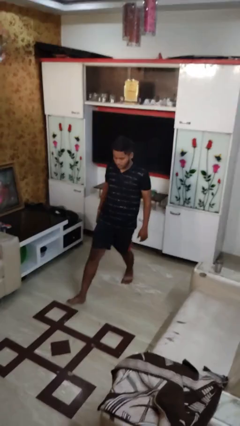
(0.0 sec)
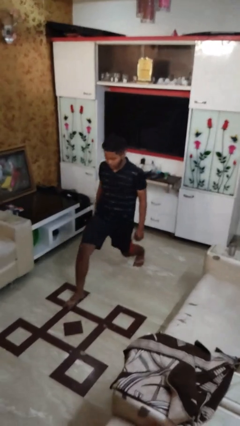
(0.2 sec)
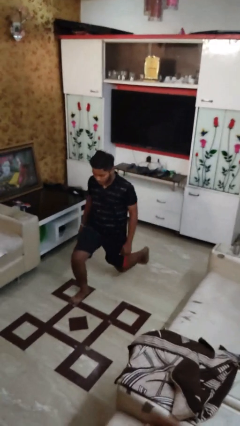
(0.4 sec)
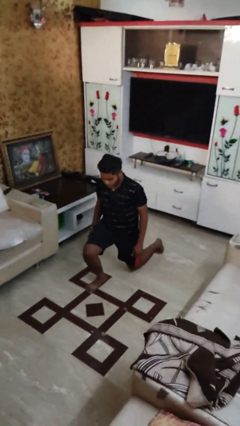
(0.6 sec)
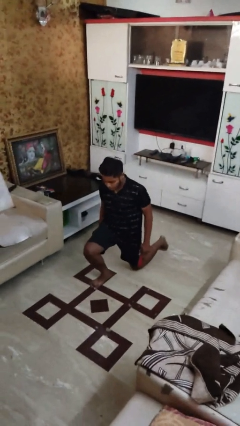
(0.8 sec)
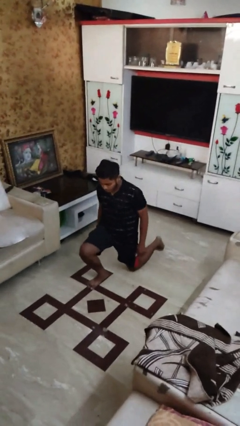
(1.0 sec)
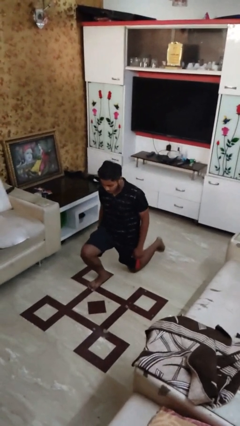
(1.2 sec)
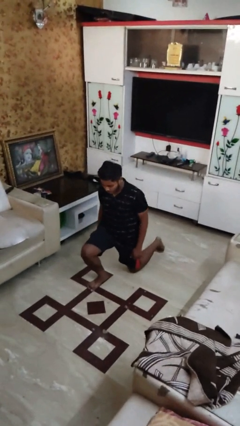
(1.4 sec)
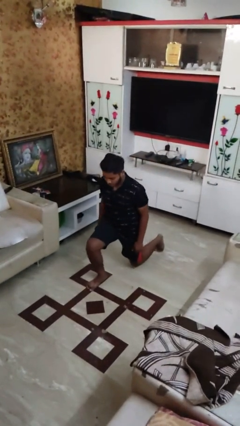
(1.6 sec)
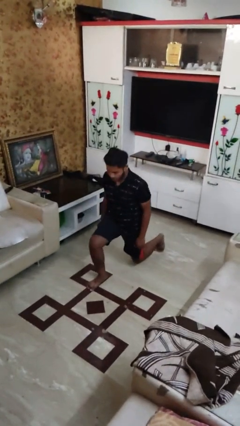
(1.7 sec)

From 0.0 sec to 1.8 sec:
person exercises with lunges

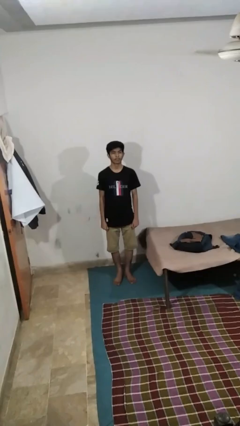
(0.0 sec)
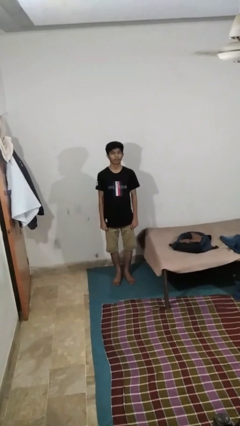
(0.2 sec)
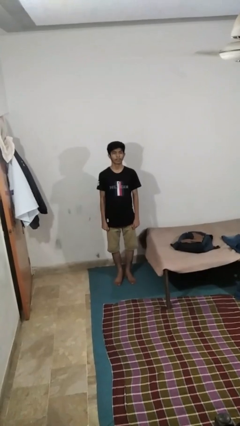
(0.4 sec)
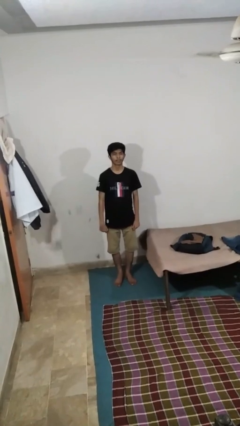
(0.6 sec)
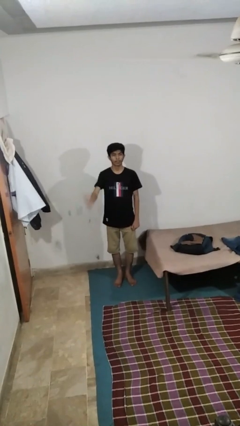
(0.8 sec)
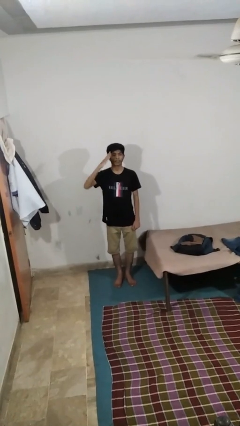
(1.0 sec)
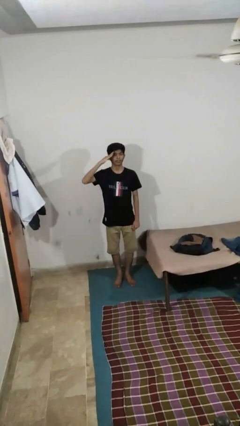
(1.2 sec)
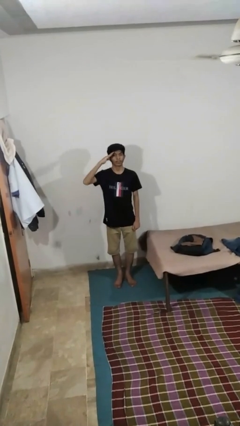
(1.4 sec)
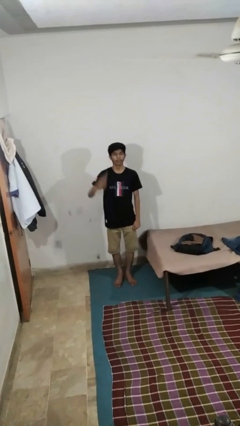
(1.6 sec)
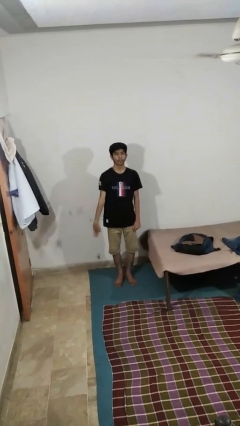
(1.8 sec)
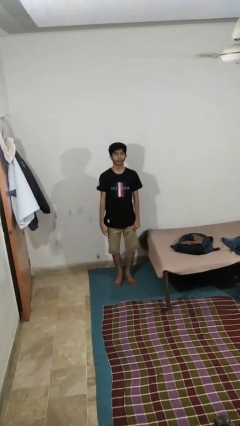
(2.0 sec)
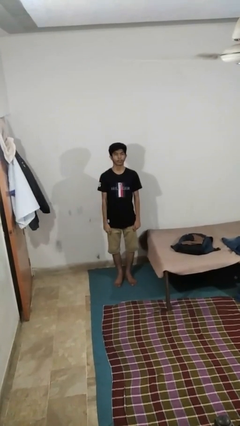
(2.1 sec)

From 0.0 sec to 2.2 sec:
person salutes

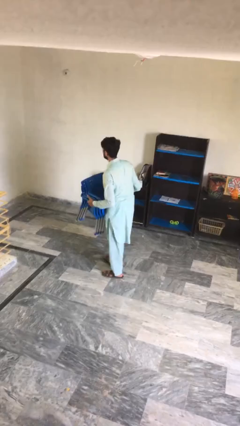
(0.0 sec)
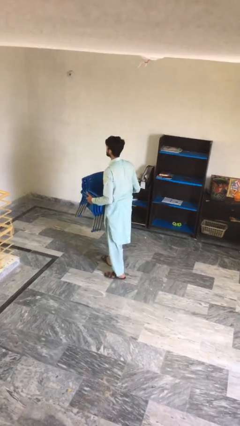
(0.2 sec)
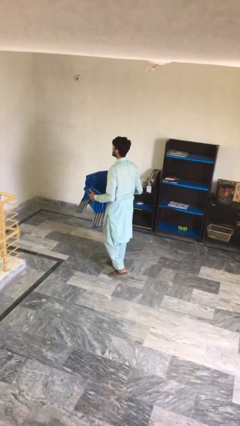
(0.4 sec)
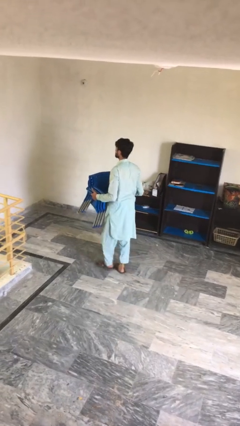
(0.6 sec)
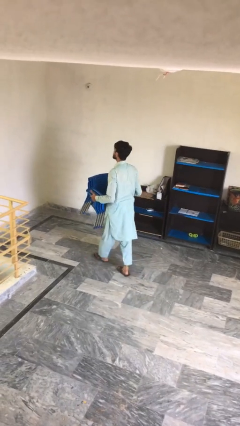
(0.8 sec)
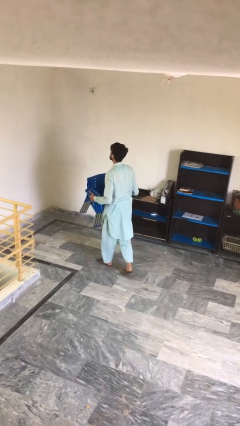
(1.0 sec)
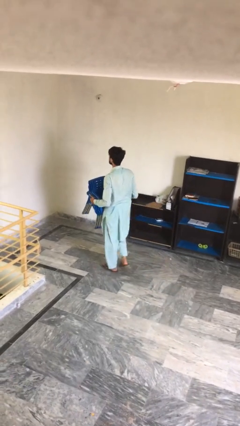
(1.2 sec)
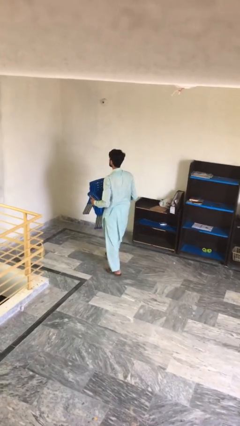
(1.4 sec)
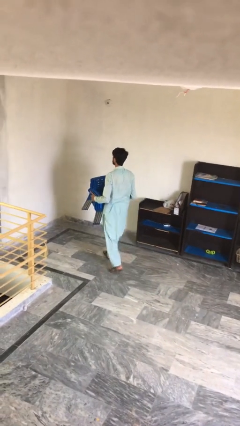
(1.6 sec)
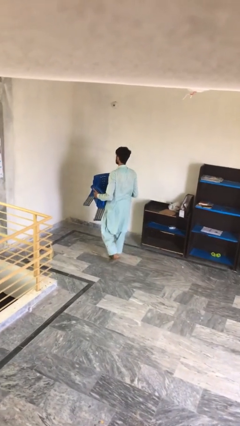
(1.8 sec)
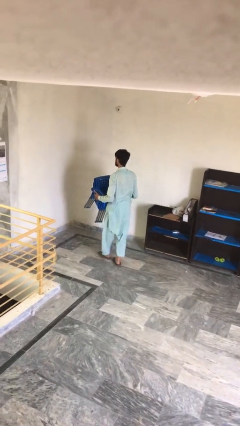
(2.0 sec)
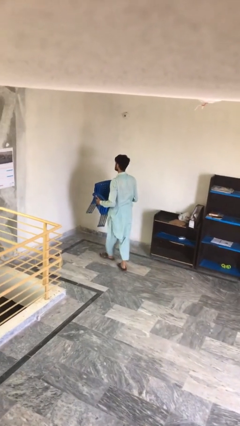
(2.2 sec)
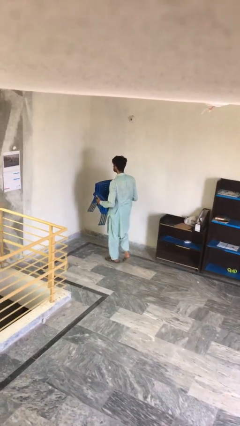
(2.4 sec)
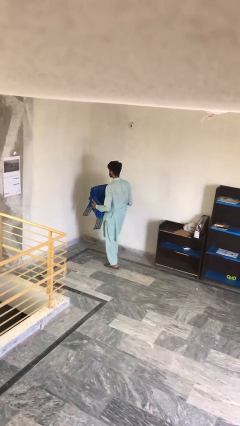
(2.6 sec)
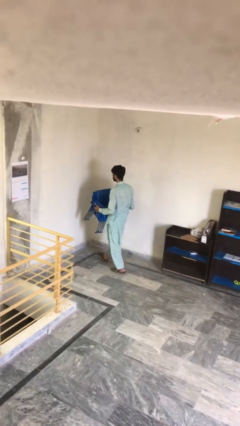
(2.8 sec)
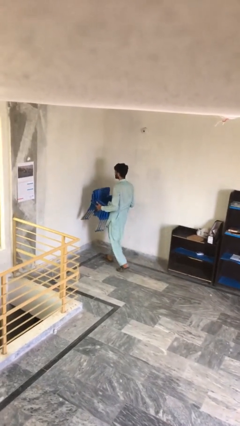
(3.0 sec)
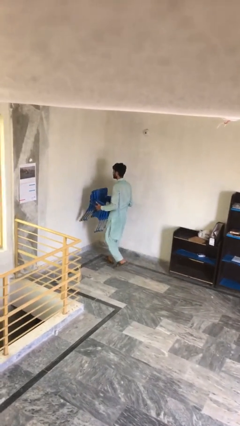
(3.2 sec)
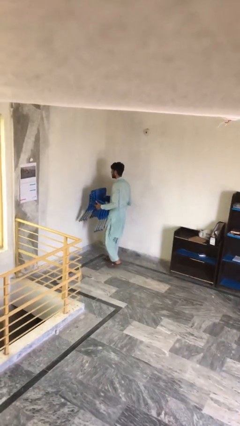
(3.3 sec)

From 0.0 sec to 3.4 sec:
person carries heavy object

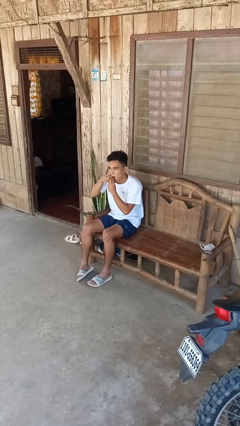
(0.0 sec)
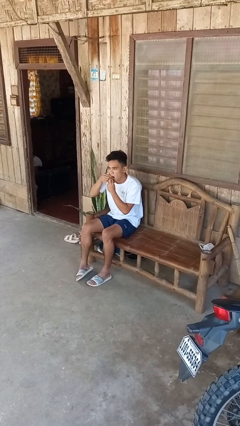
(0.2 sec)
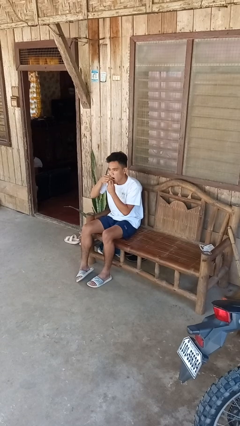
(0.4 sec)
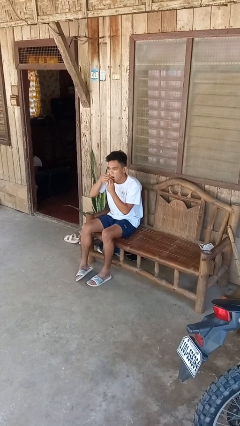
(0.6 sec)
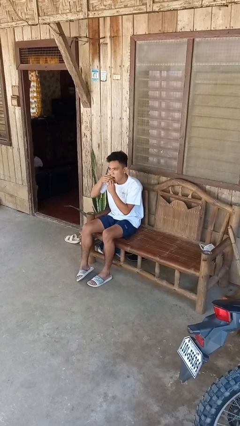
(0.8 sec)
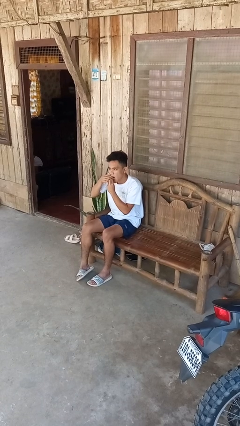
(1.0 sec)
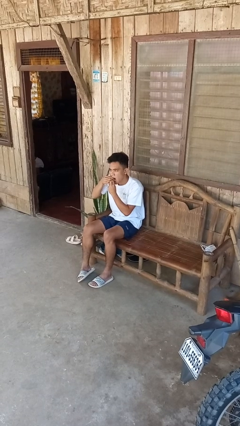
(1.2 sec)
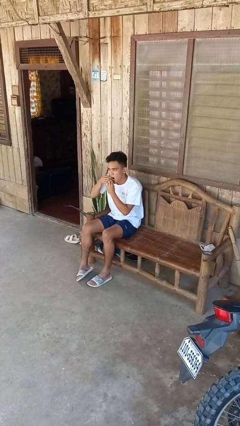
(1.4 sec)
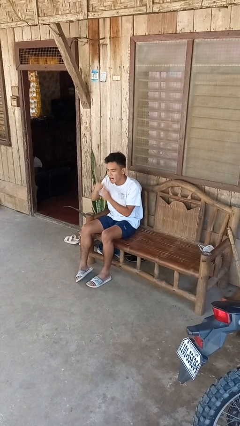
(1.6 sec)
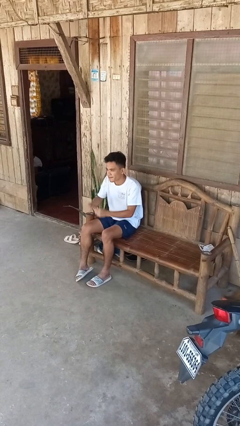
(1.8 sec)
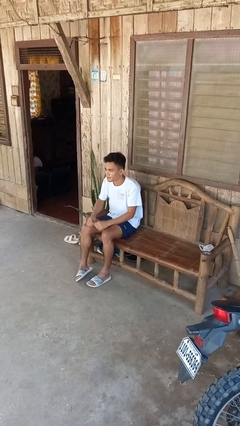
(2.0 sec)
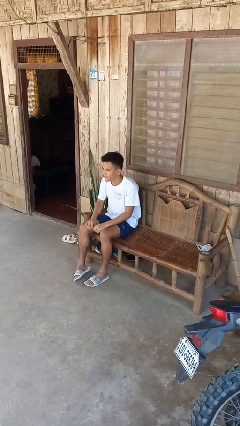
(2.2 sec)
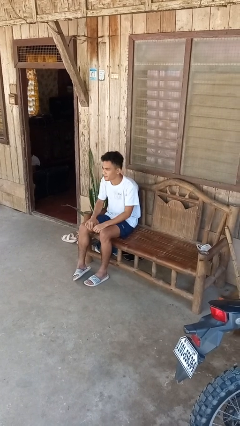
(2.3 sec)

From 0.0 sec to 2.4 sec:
person flosses

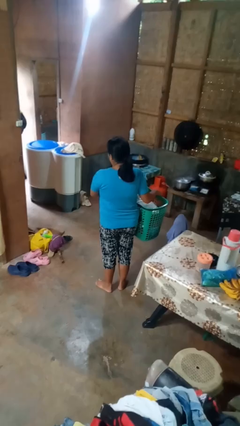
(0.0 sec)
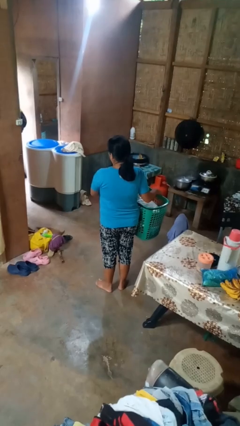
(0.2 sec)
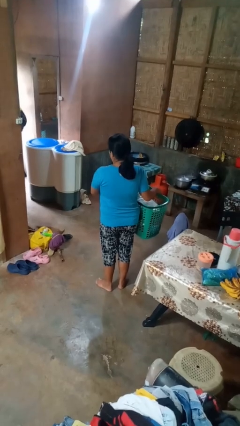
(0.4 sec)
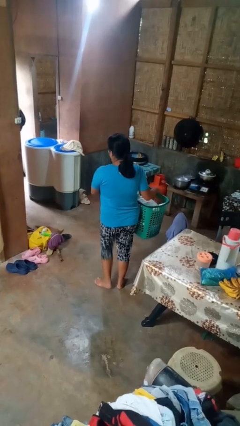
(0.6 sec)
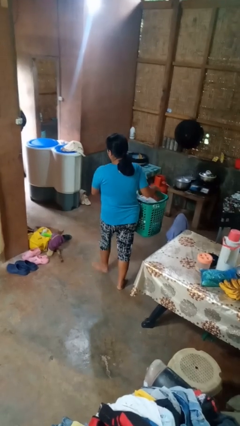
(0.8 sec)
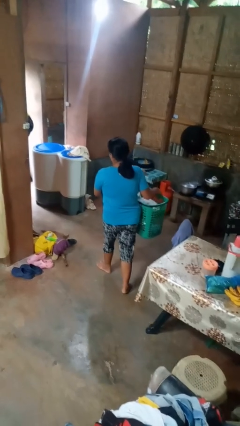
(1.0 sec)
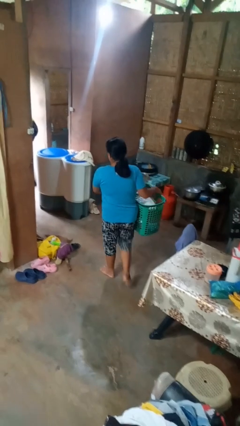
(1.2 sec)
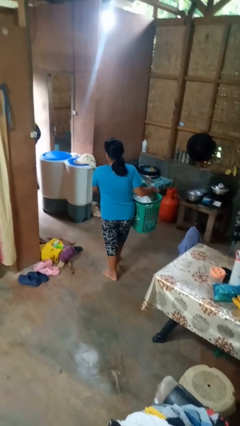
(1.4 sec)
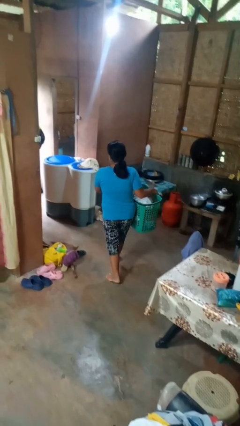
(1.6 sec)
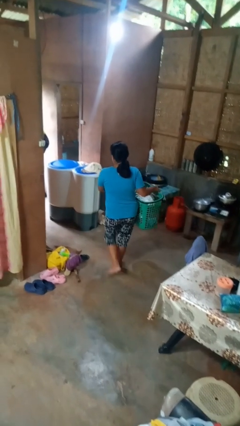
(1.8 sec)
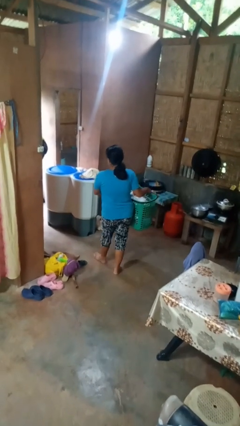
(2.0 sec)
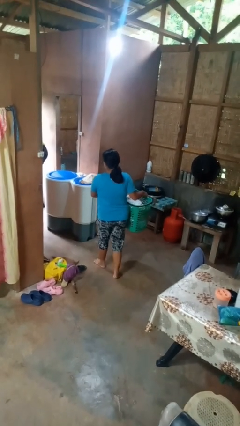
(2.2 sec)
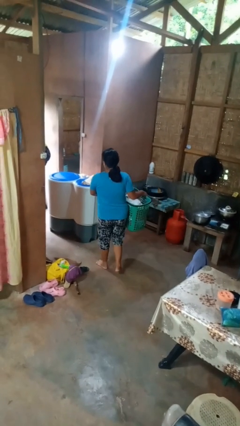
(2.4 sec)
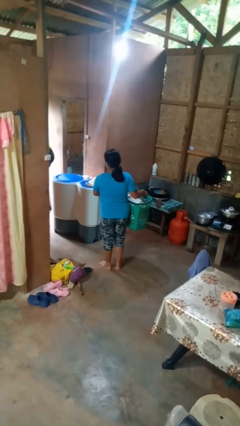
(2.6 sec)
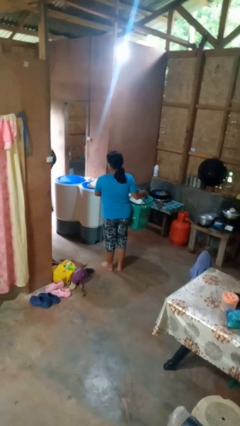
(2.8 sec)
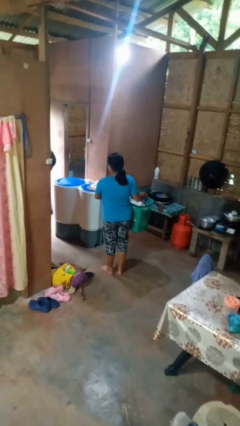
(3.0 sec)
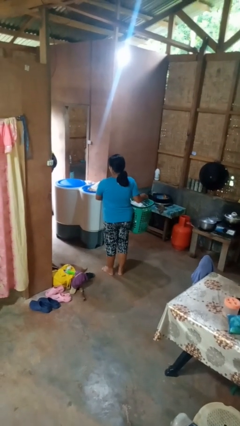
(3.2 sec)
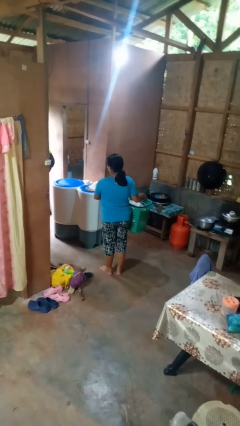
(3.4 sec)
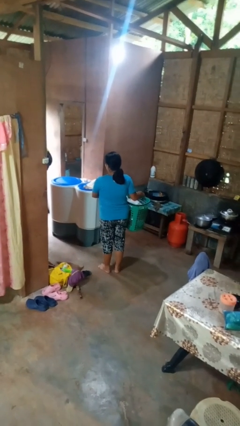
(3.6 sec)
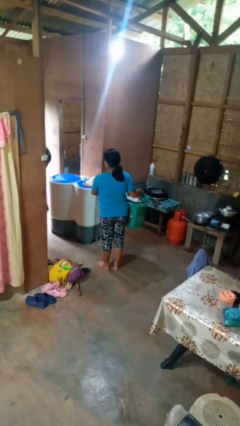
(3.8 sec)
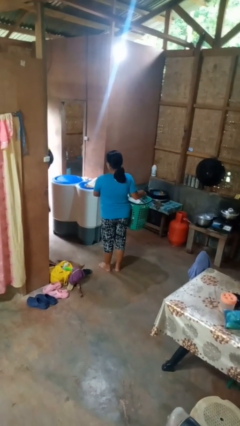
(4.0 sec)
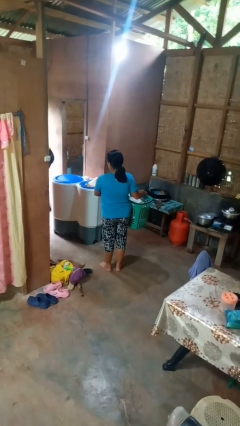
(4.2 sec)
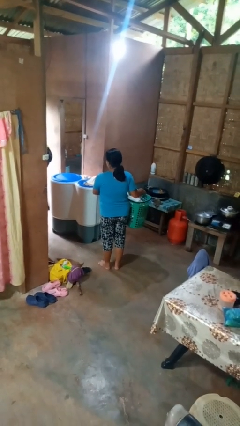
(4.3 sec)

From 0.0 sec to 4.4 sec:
person carries laundry basket

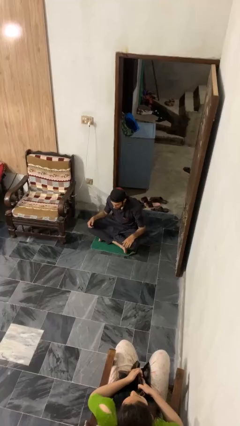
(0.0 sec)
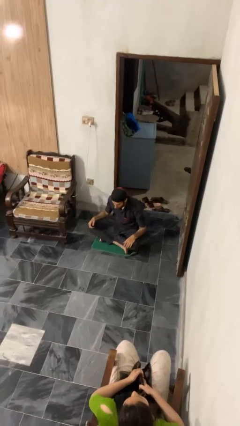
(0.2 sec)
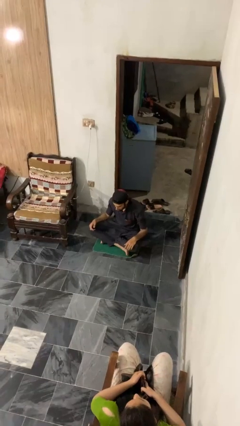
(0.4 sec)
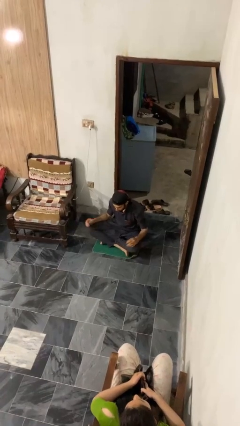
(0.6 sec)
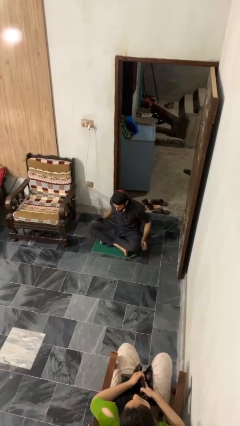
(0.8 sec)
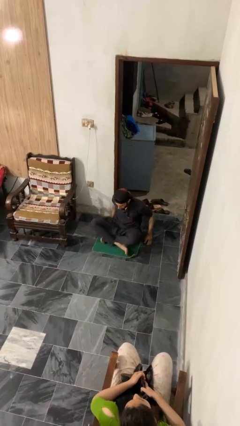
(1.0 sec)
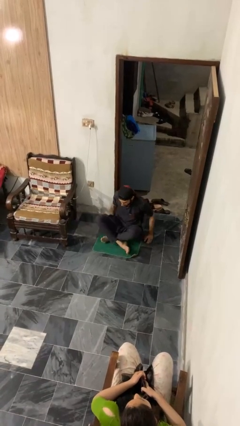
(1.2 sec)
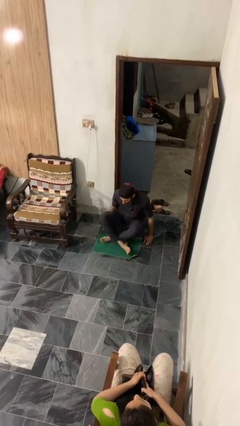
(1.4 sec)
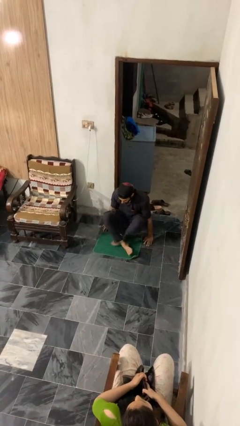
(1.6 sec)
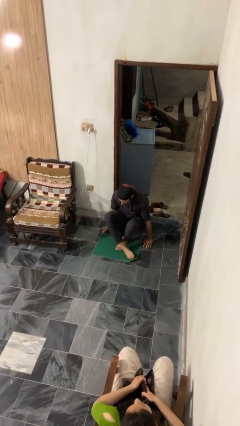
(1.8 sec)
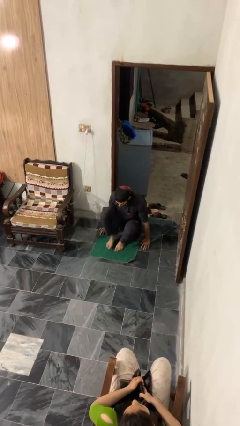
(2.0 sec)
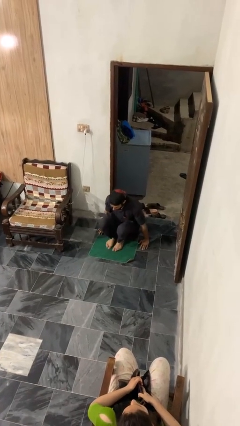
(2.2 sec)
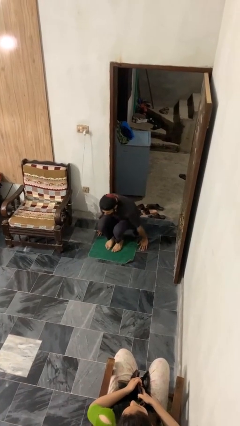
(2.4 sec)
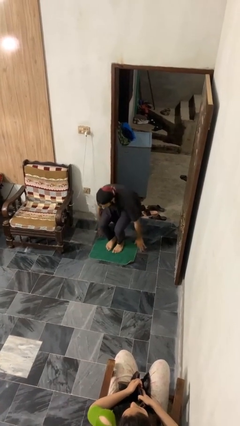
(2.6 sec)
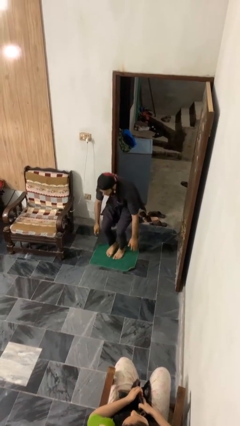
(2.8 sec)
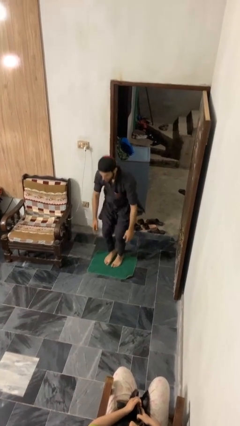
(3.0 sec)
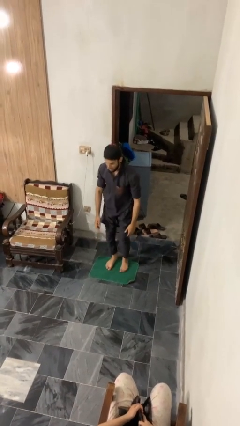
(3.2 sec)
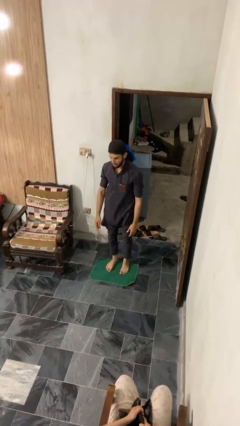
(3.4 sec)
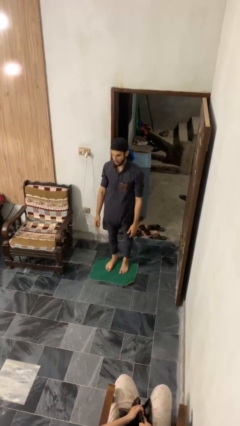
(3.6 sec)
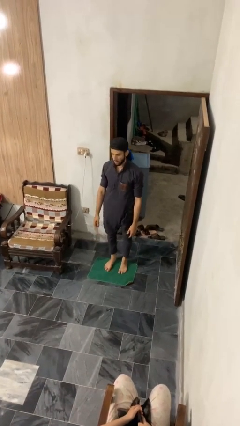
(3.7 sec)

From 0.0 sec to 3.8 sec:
person stands up from floor
